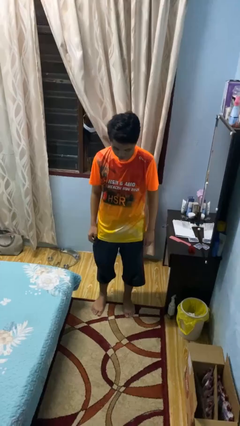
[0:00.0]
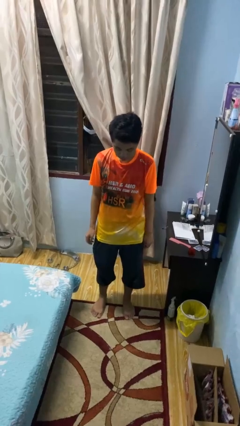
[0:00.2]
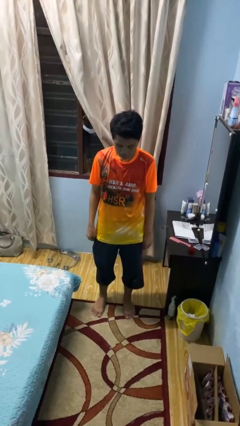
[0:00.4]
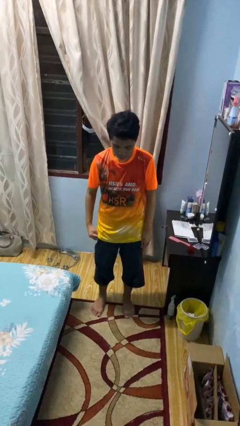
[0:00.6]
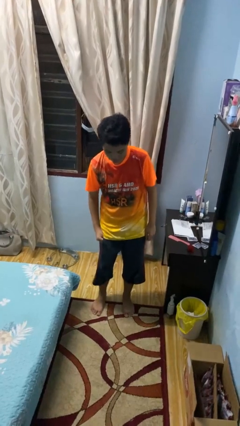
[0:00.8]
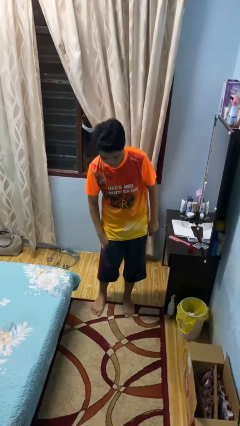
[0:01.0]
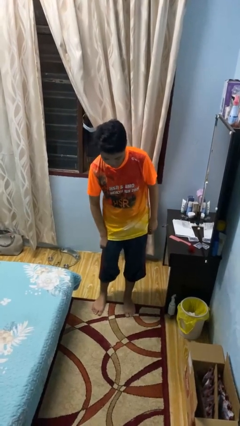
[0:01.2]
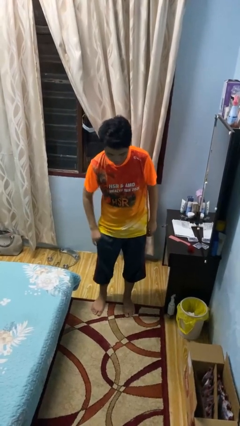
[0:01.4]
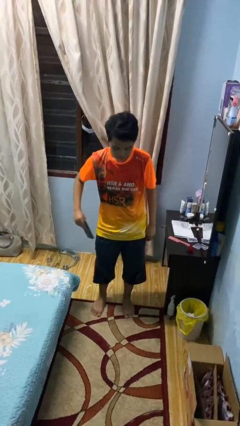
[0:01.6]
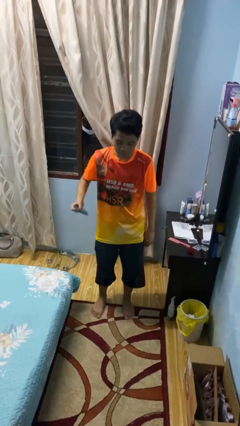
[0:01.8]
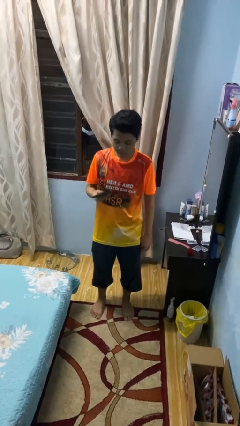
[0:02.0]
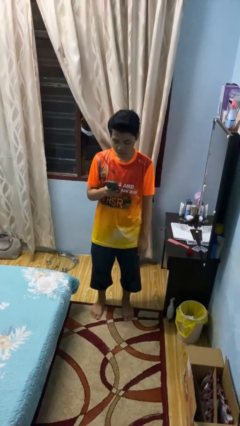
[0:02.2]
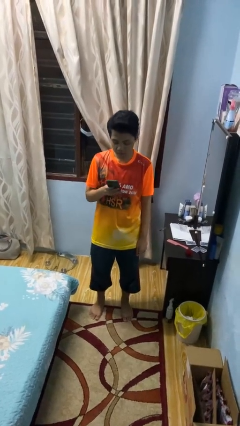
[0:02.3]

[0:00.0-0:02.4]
person takes phone from pocket

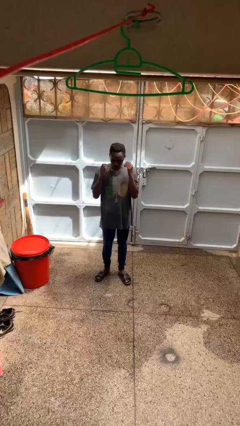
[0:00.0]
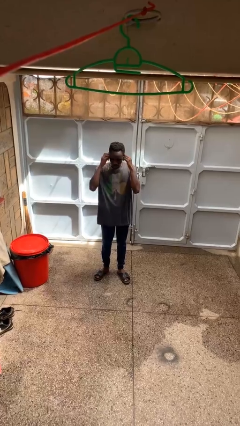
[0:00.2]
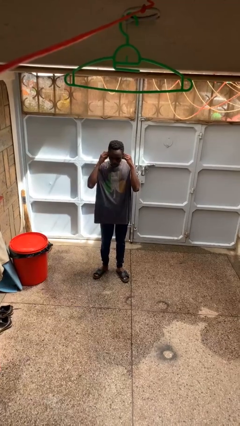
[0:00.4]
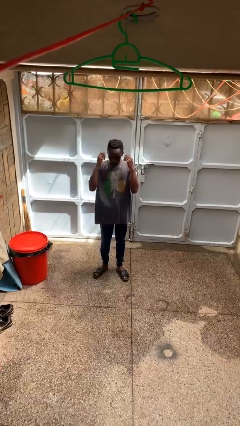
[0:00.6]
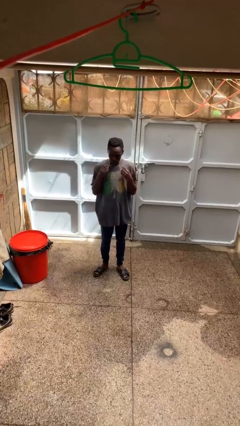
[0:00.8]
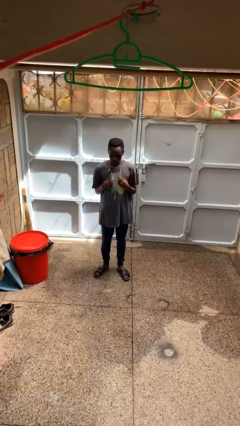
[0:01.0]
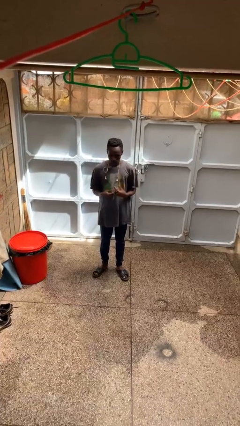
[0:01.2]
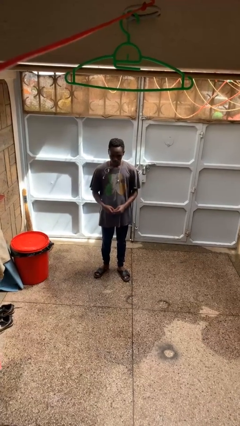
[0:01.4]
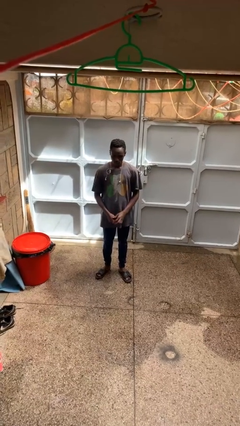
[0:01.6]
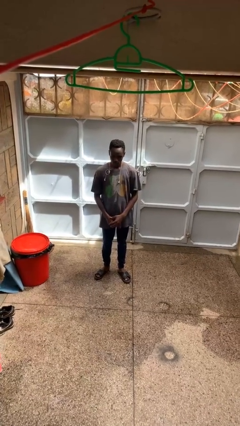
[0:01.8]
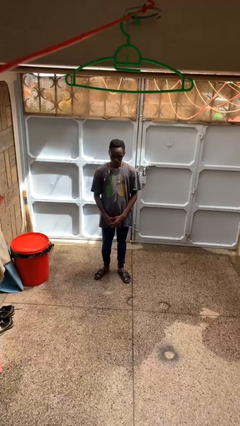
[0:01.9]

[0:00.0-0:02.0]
person takes off headphones

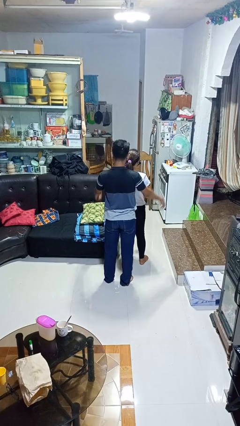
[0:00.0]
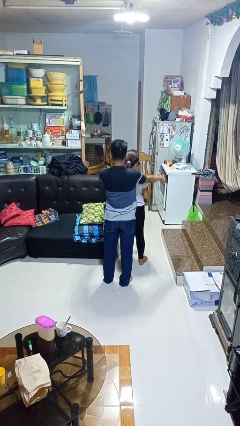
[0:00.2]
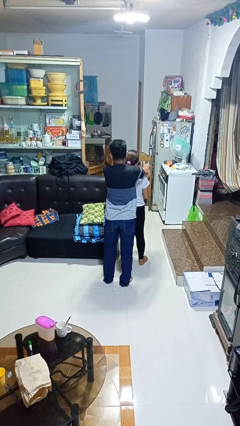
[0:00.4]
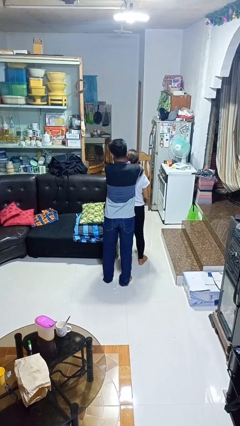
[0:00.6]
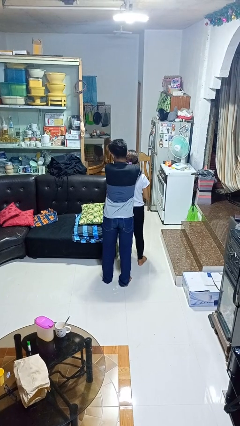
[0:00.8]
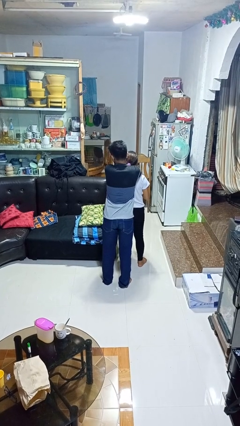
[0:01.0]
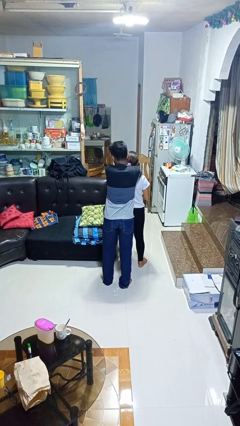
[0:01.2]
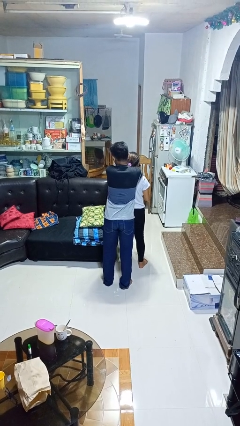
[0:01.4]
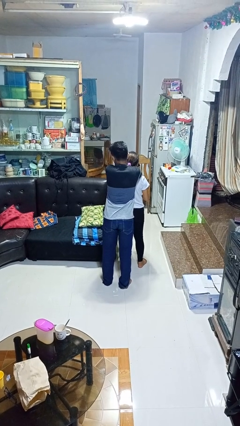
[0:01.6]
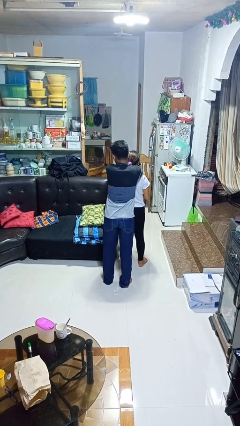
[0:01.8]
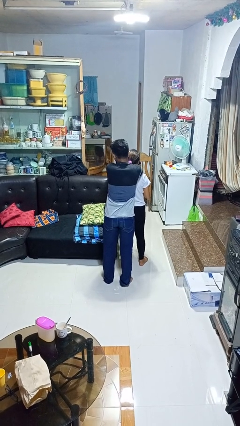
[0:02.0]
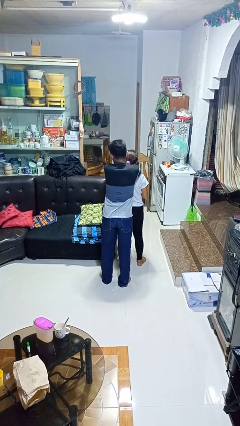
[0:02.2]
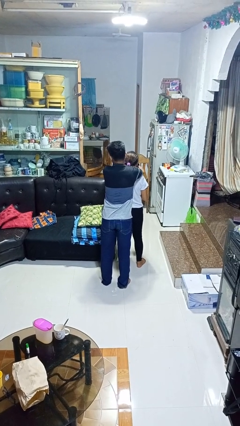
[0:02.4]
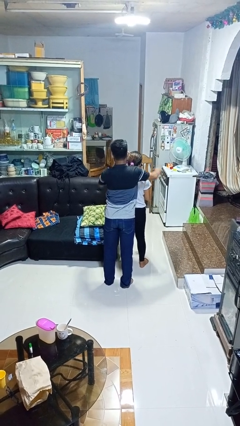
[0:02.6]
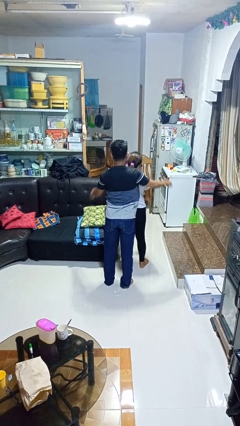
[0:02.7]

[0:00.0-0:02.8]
person hugs person from behind

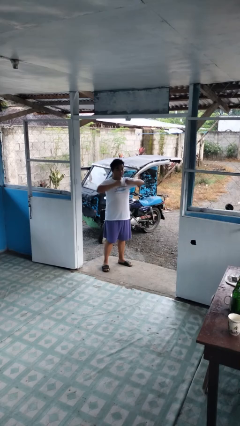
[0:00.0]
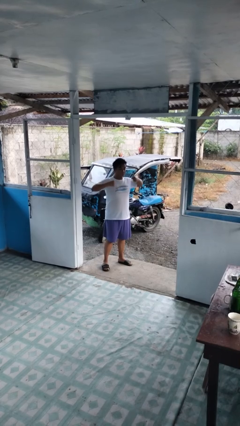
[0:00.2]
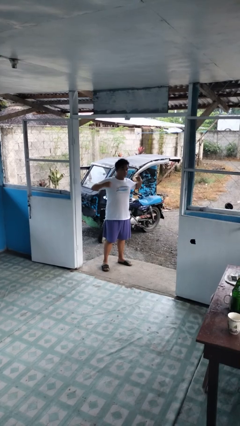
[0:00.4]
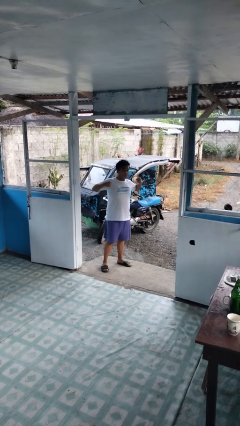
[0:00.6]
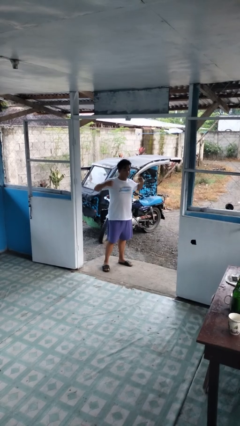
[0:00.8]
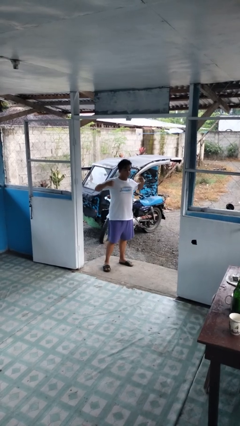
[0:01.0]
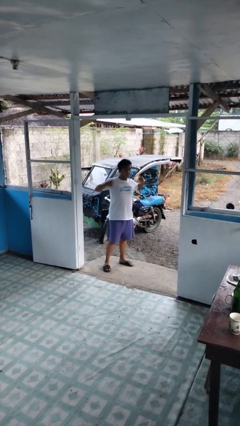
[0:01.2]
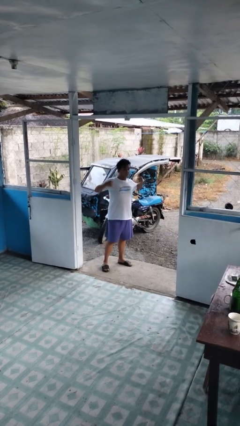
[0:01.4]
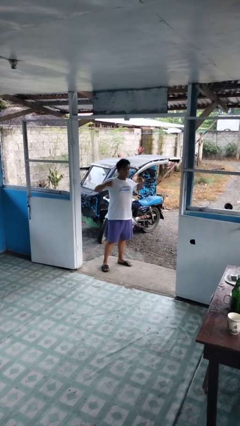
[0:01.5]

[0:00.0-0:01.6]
person gestures zoom in

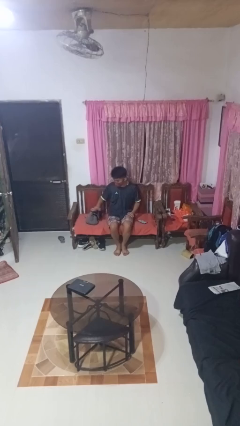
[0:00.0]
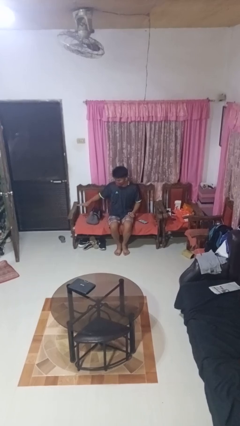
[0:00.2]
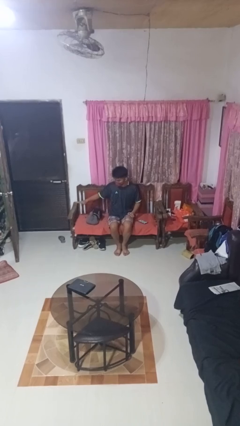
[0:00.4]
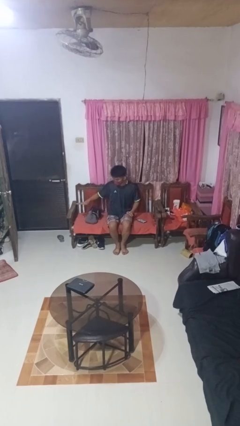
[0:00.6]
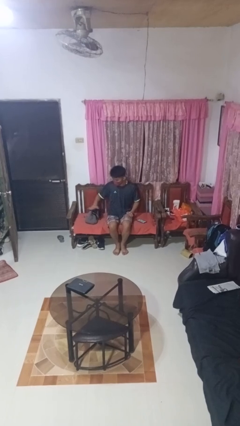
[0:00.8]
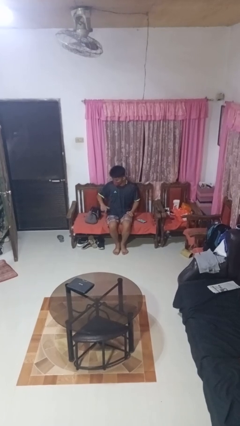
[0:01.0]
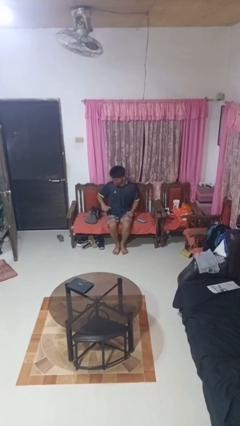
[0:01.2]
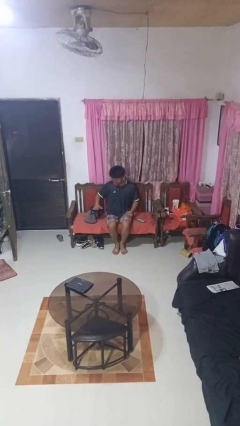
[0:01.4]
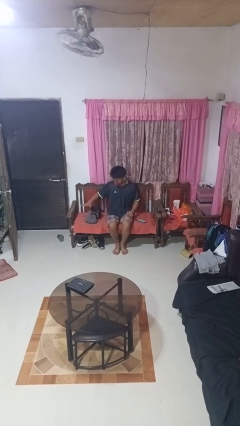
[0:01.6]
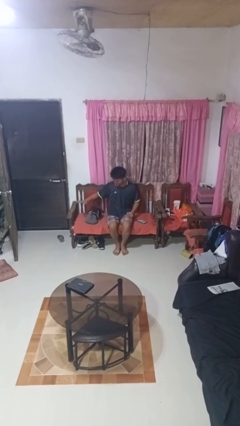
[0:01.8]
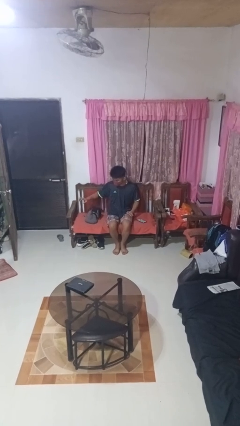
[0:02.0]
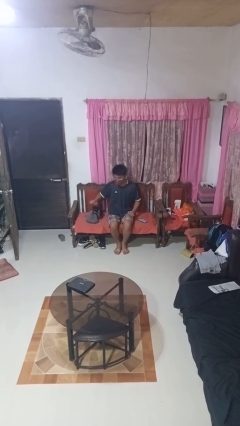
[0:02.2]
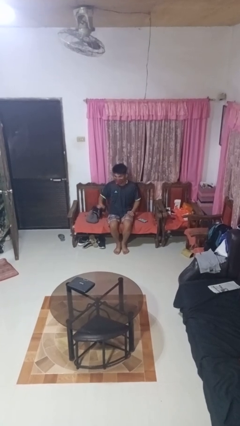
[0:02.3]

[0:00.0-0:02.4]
person waves hand over object

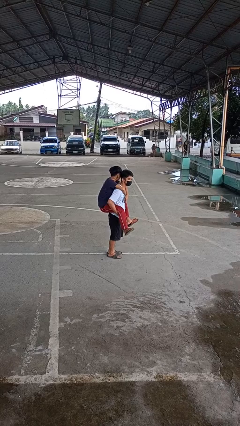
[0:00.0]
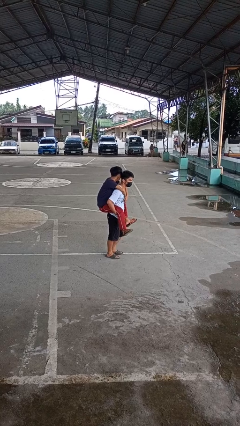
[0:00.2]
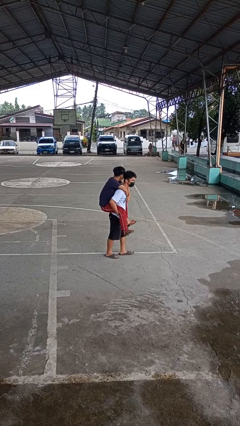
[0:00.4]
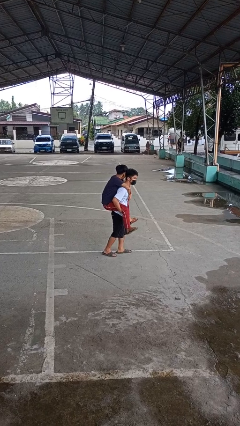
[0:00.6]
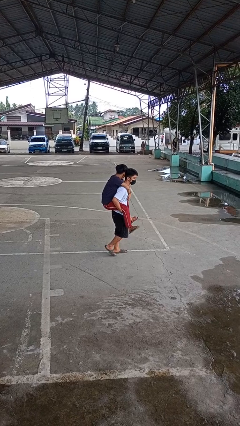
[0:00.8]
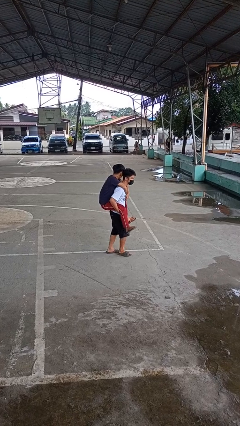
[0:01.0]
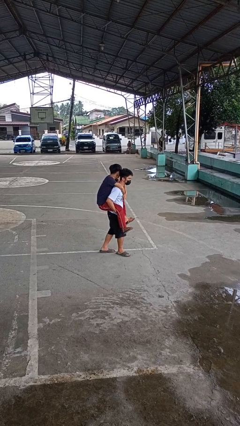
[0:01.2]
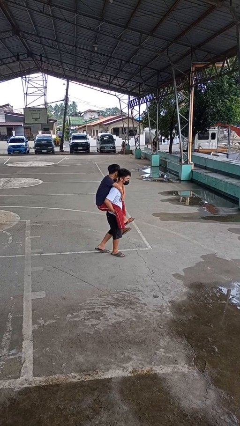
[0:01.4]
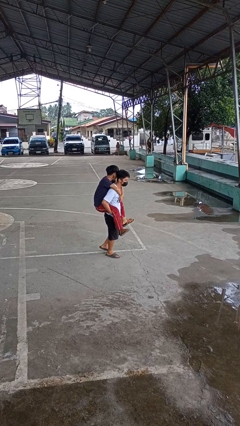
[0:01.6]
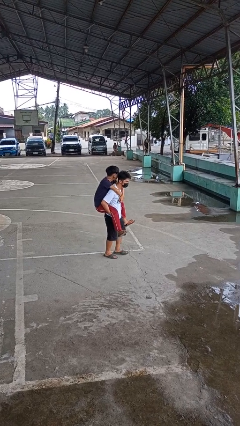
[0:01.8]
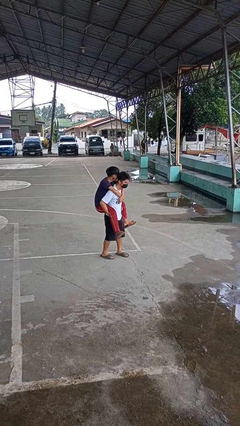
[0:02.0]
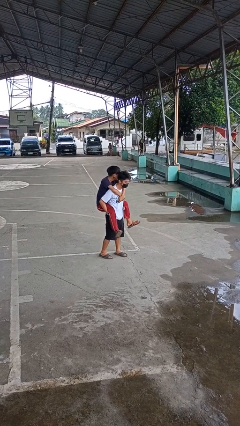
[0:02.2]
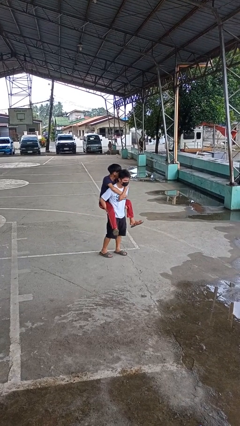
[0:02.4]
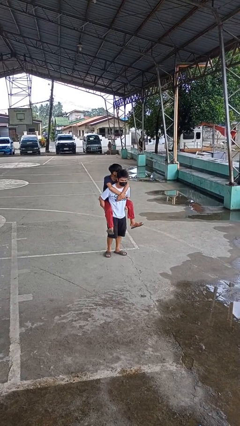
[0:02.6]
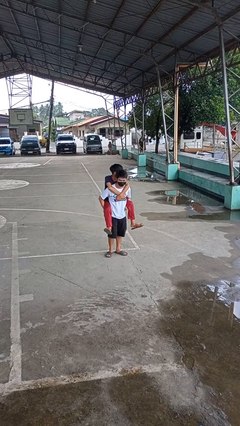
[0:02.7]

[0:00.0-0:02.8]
person carries person on back

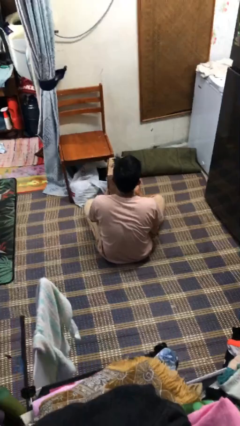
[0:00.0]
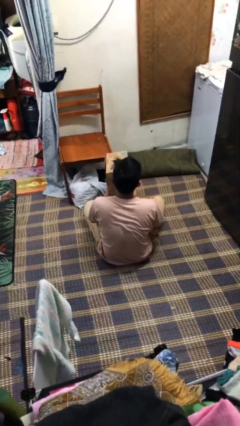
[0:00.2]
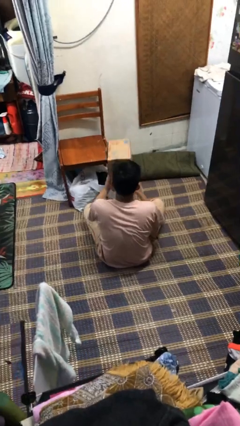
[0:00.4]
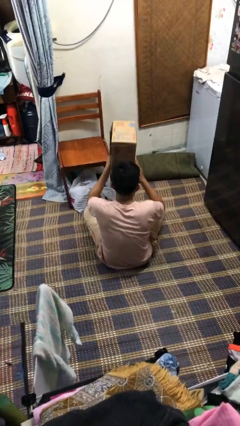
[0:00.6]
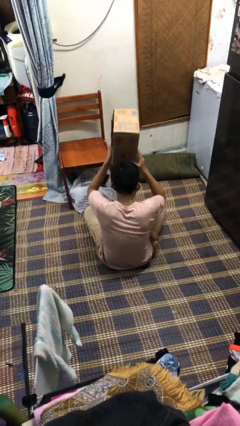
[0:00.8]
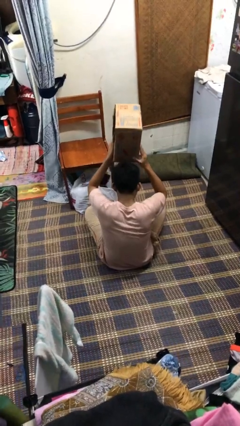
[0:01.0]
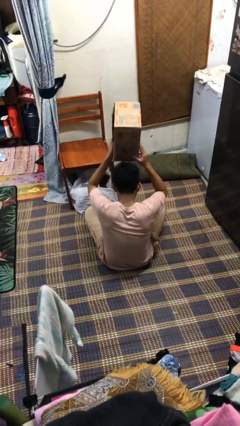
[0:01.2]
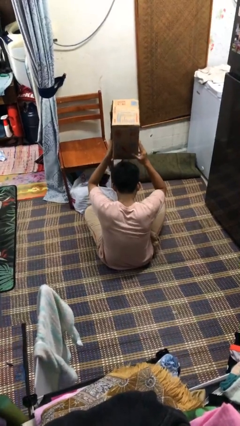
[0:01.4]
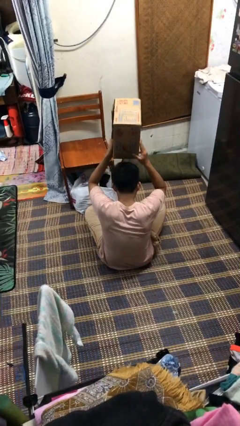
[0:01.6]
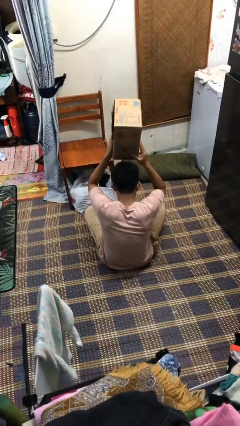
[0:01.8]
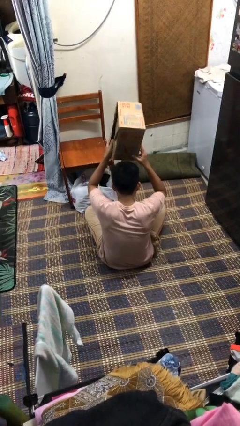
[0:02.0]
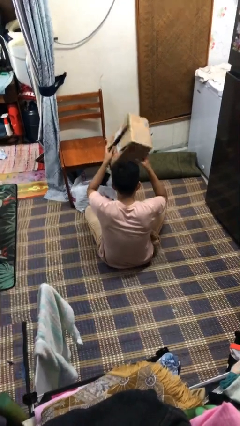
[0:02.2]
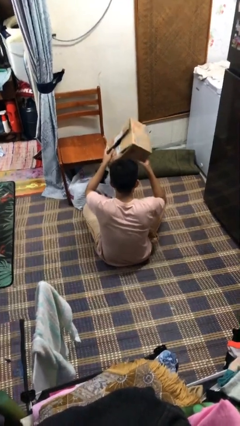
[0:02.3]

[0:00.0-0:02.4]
person holds object above head

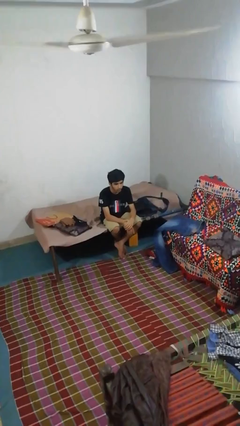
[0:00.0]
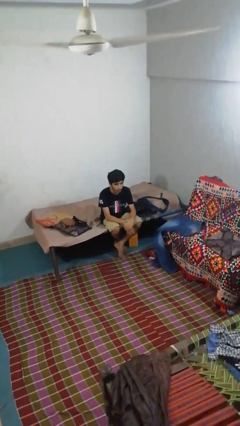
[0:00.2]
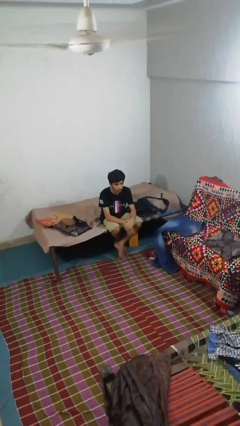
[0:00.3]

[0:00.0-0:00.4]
person strokes chin
